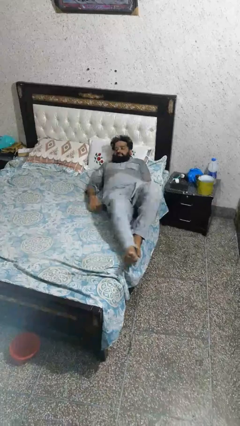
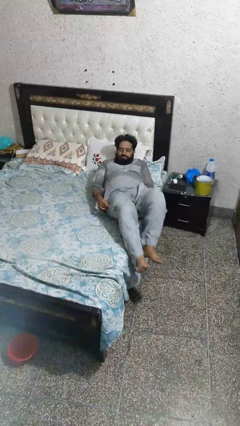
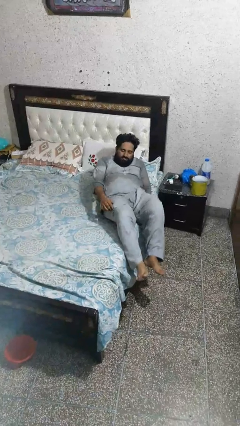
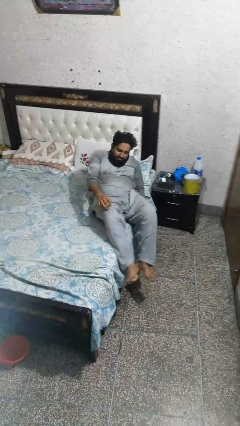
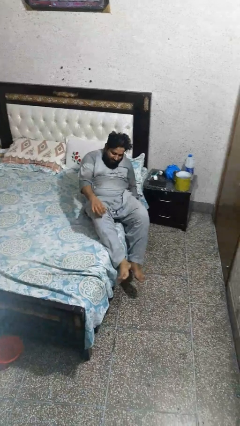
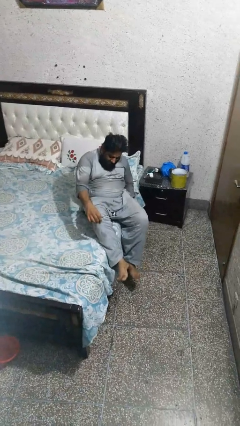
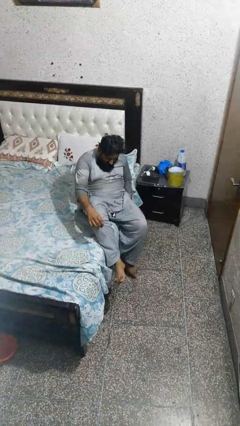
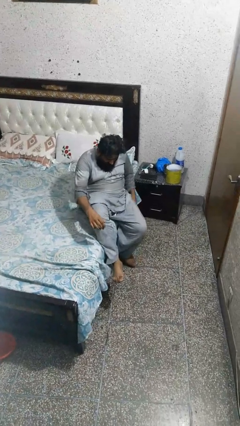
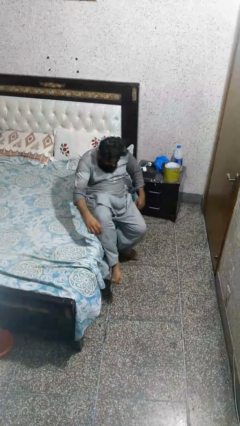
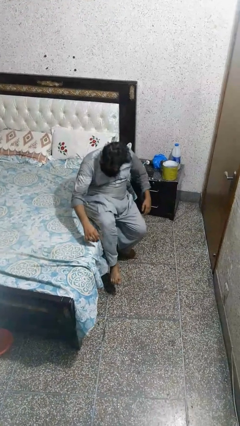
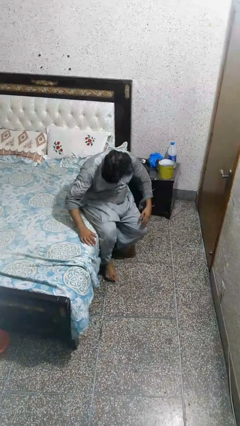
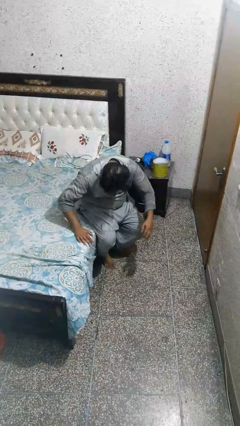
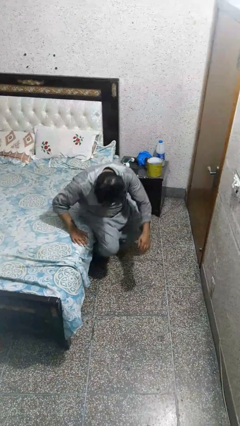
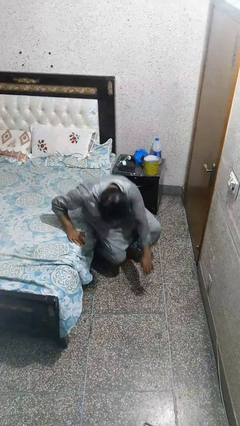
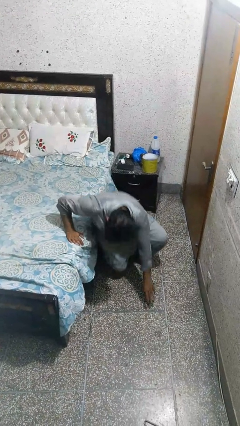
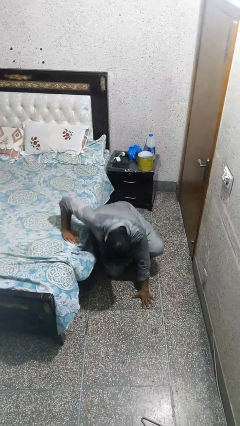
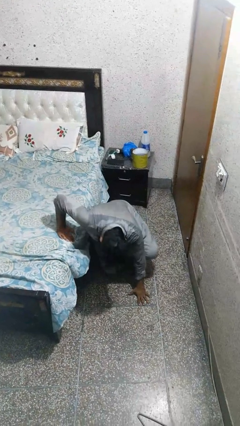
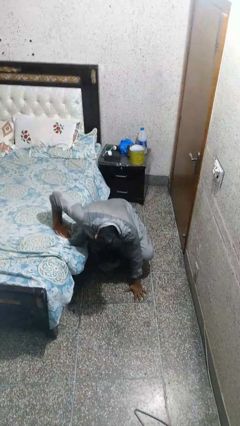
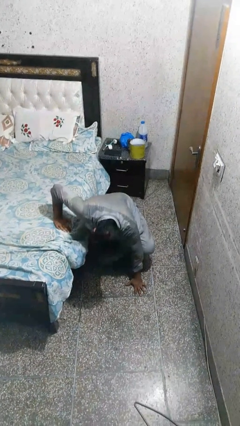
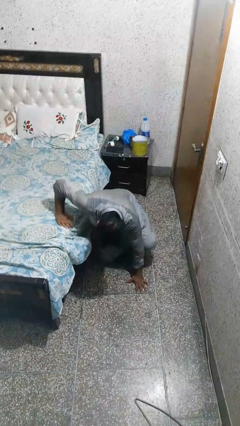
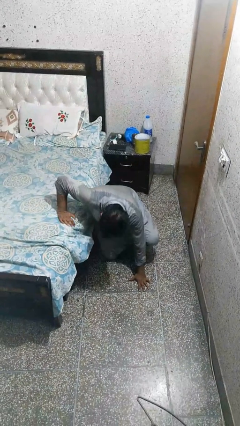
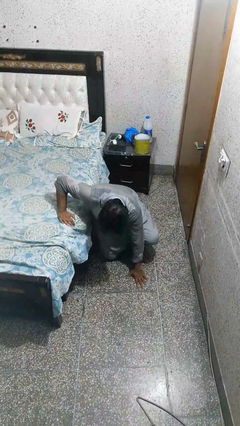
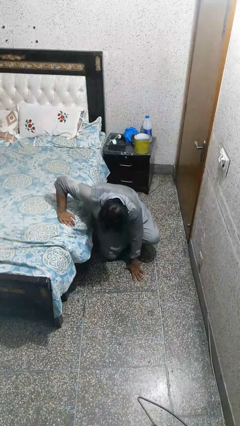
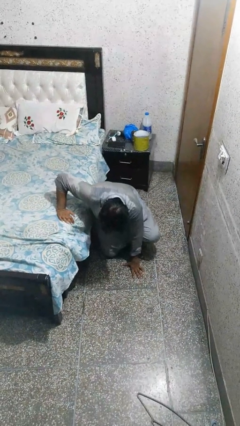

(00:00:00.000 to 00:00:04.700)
person falls from bed

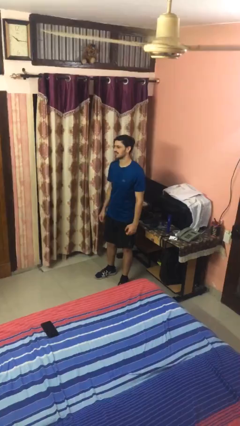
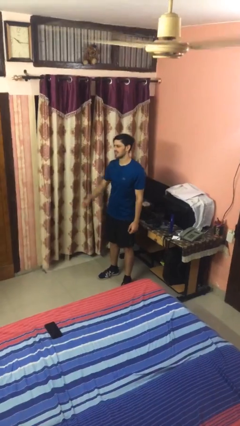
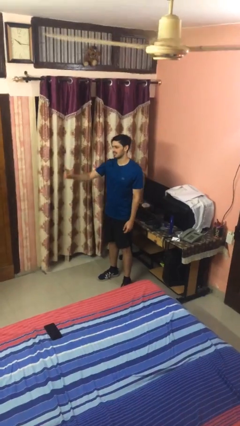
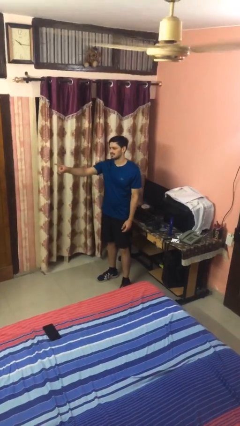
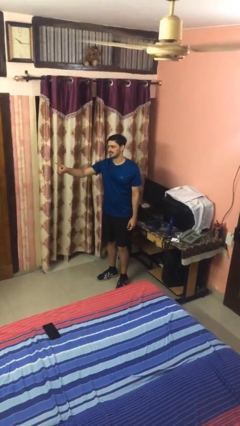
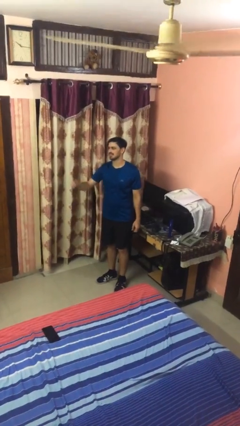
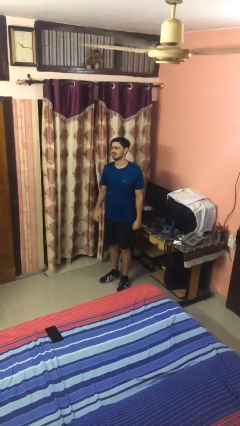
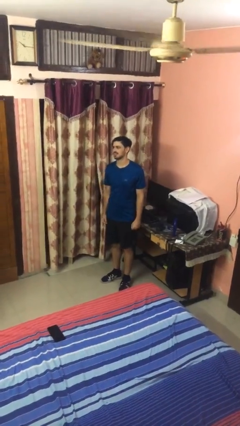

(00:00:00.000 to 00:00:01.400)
person points at person

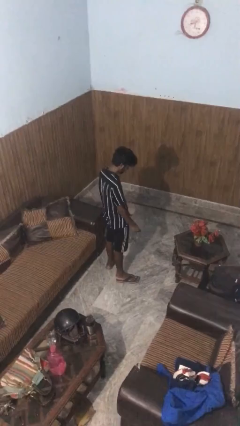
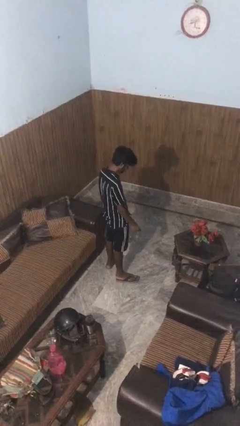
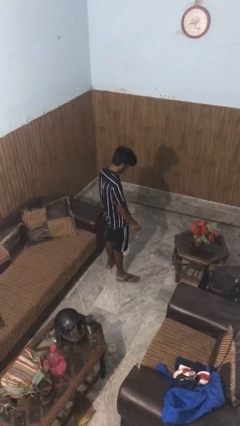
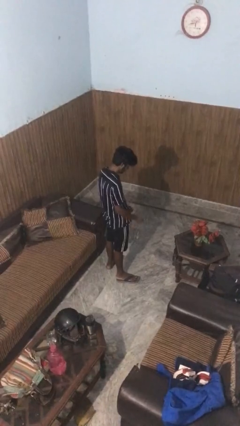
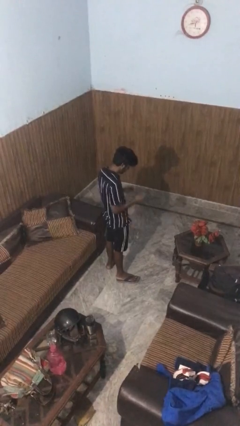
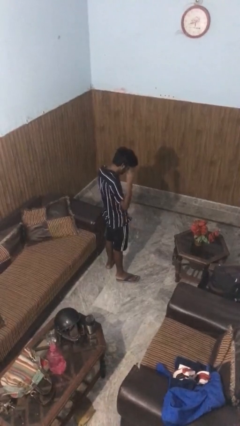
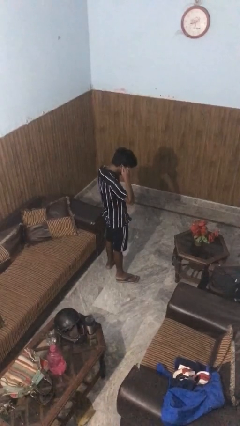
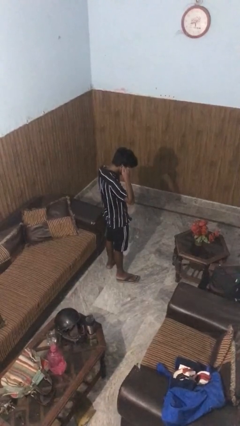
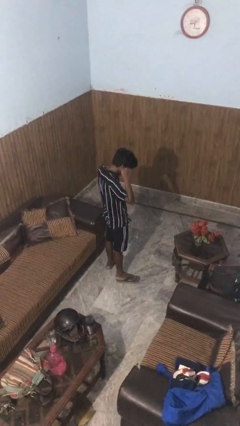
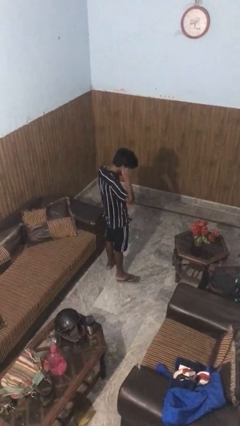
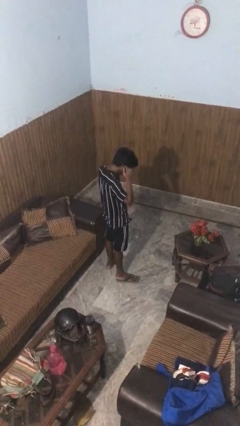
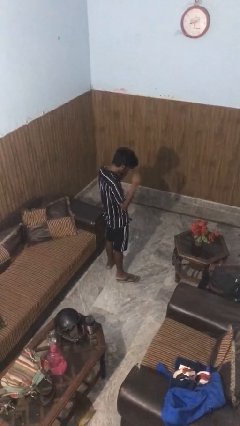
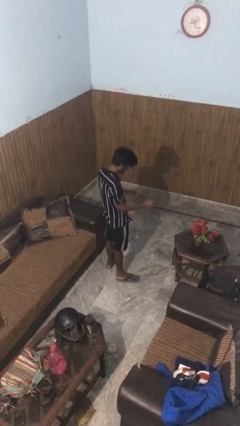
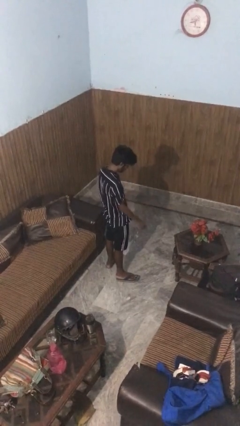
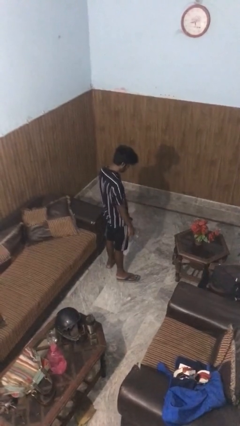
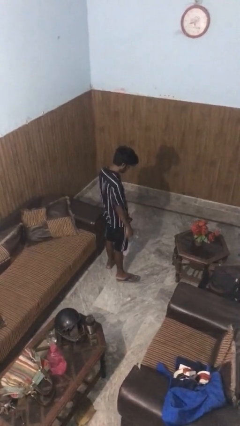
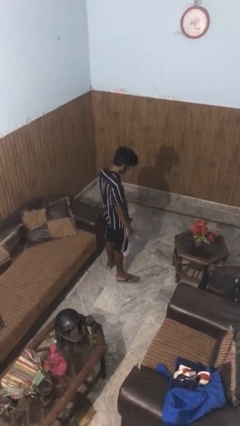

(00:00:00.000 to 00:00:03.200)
person puts on headphones

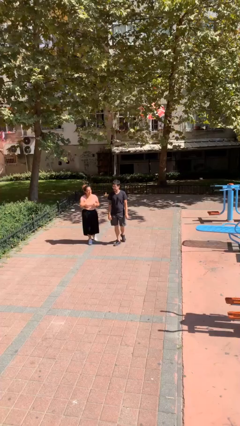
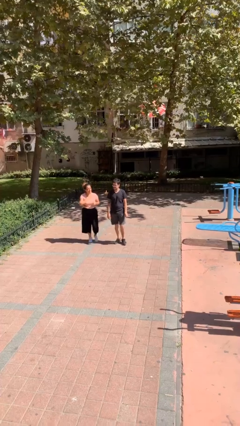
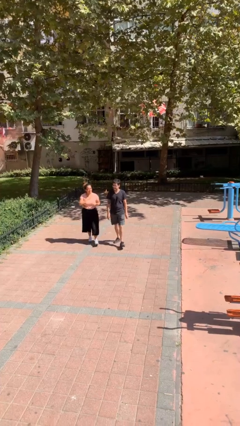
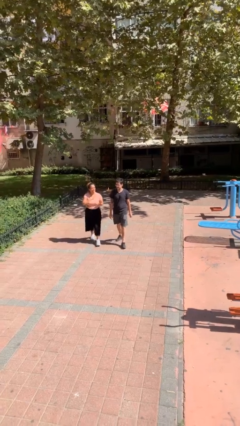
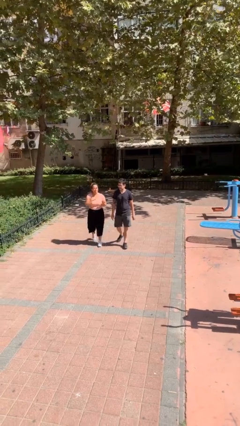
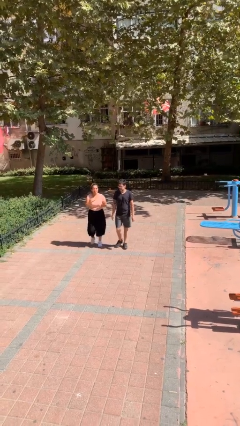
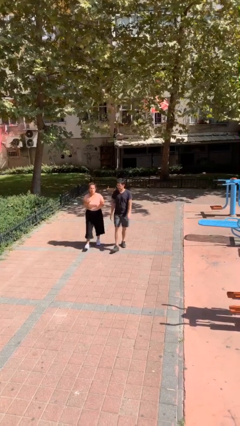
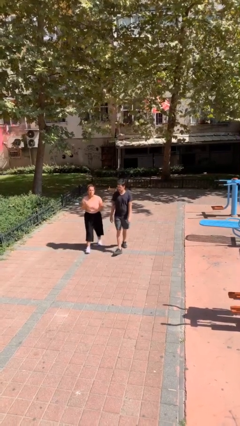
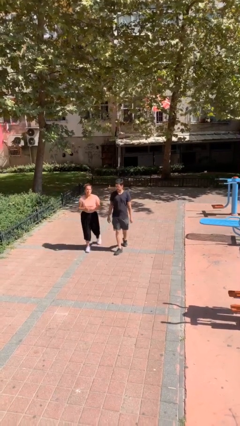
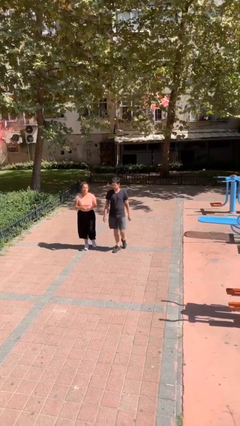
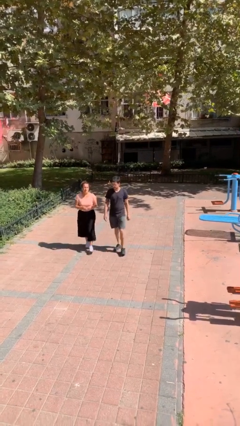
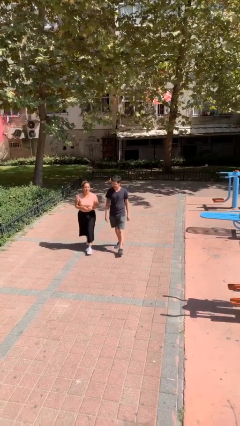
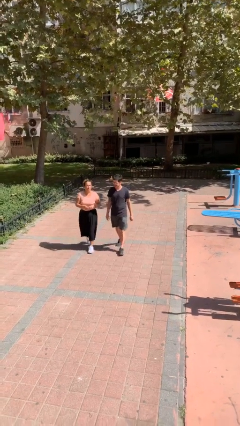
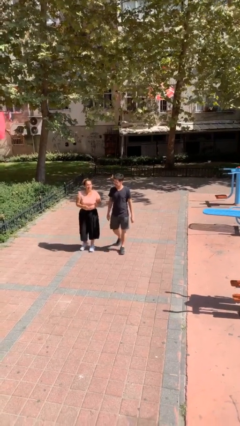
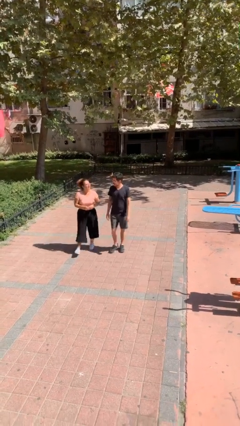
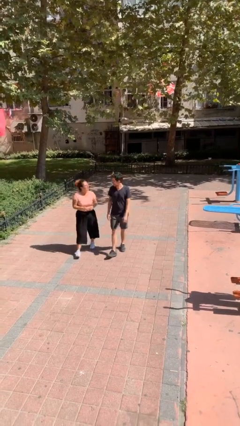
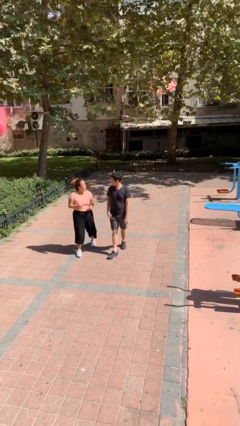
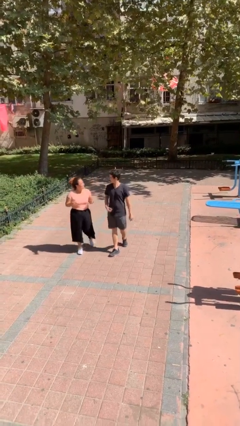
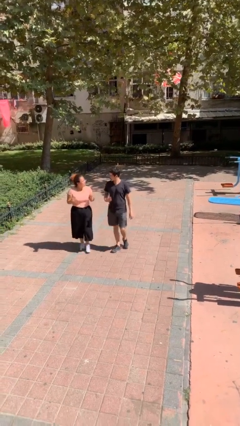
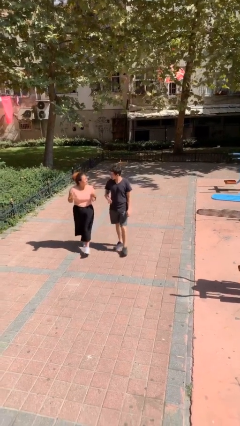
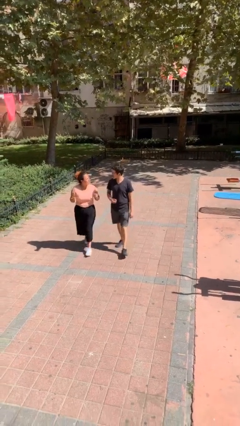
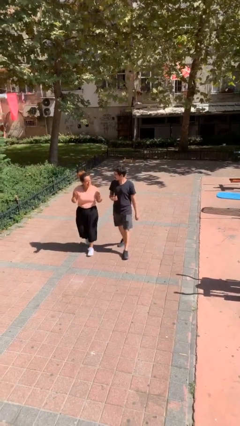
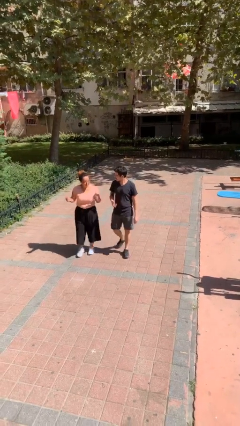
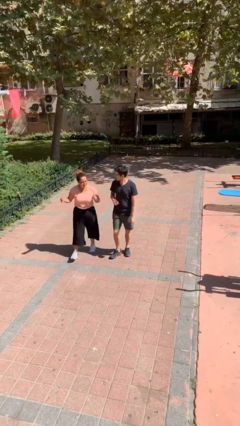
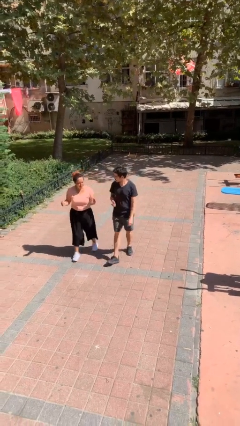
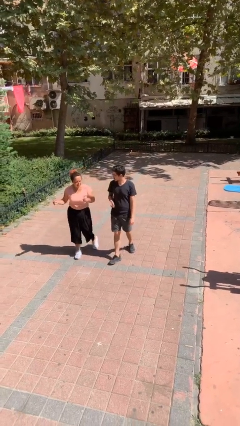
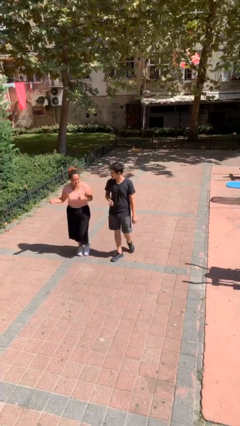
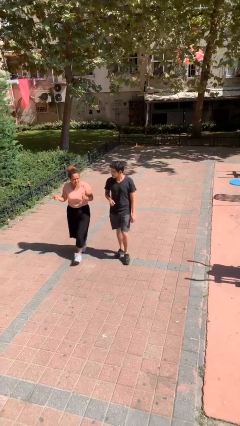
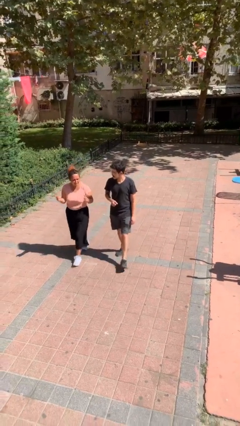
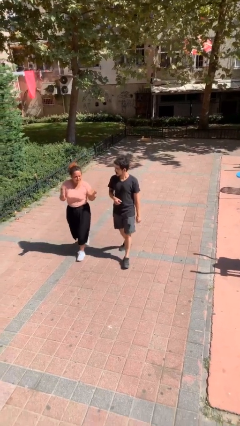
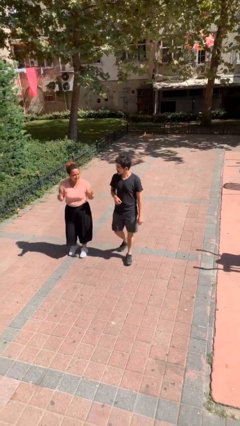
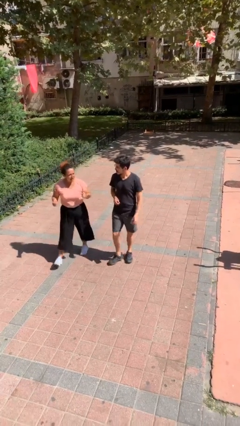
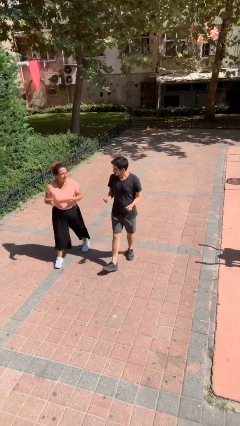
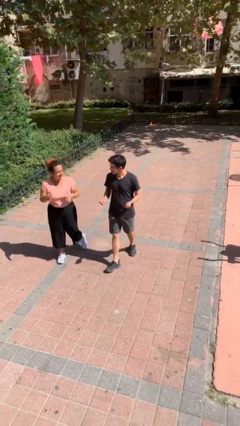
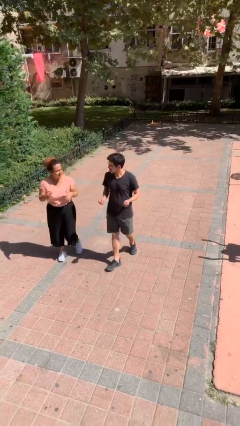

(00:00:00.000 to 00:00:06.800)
person talks to person

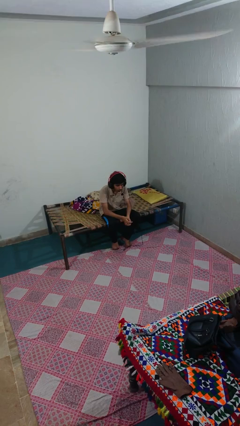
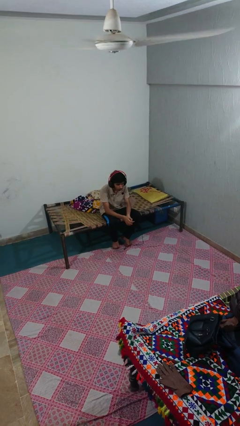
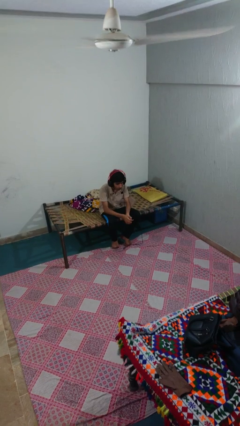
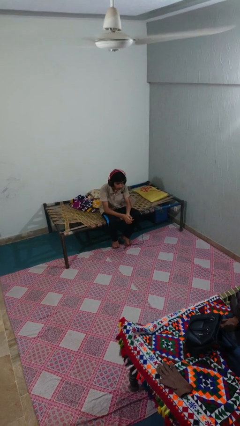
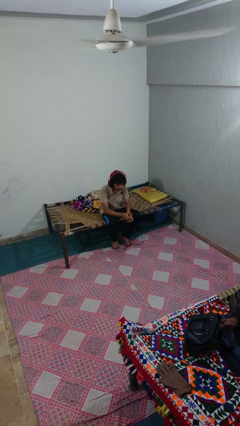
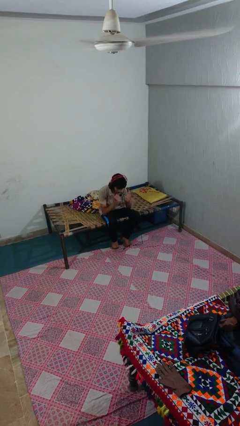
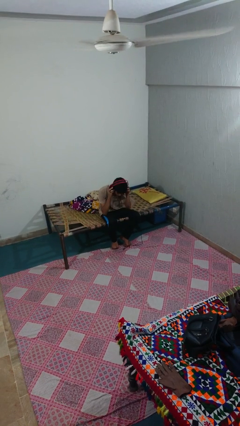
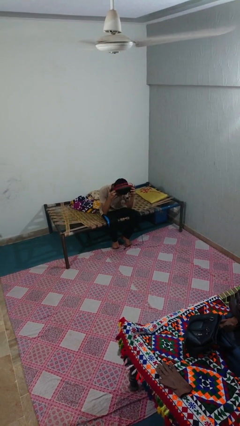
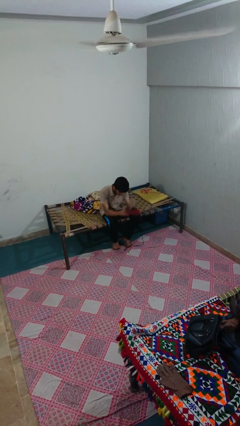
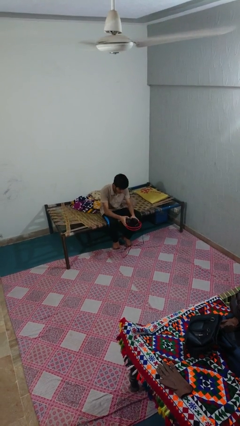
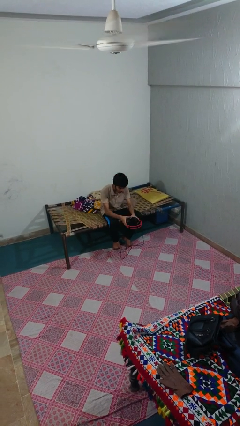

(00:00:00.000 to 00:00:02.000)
person takes off headphones
